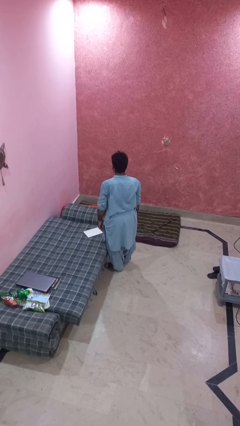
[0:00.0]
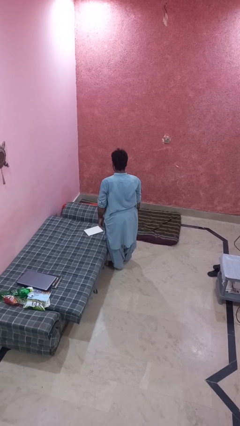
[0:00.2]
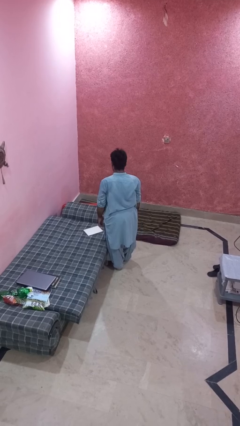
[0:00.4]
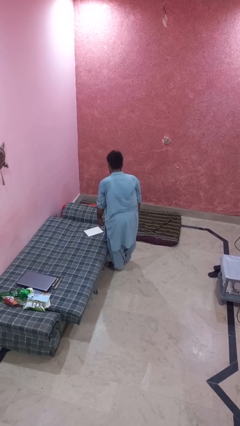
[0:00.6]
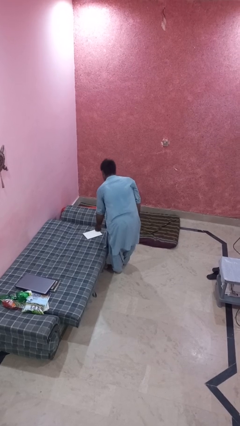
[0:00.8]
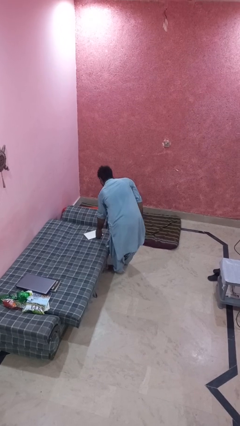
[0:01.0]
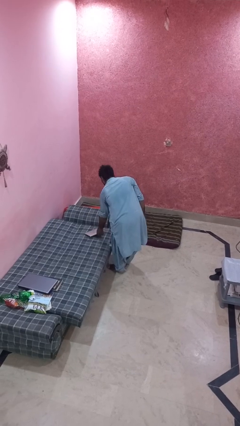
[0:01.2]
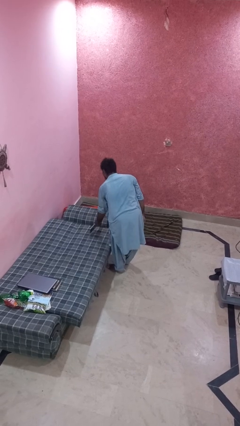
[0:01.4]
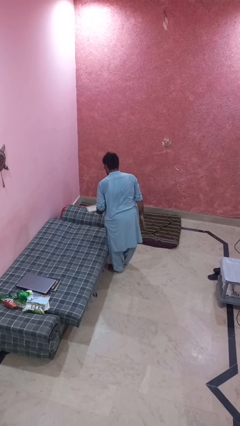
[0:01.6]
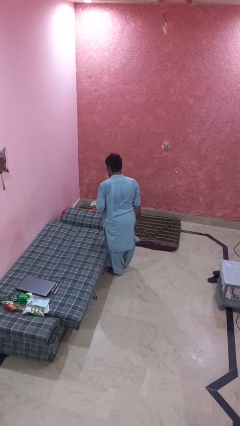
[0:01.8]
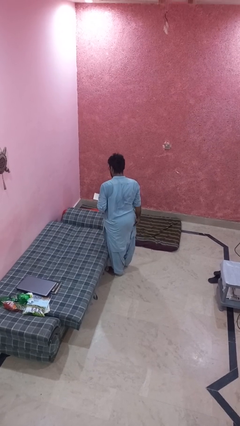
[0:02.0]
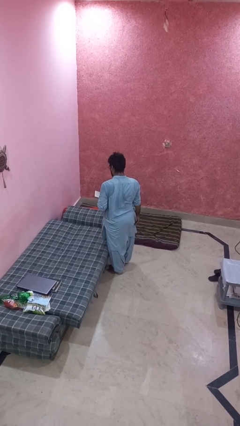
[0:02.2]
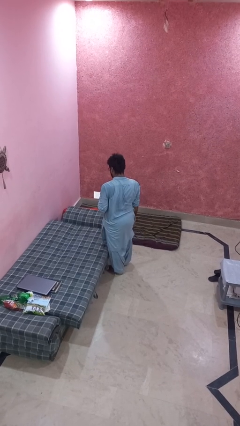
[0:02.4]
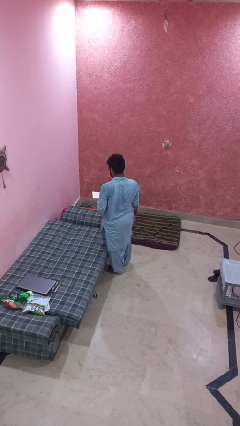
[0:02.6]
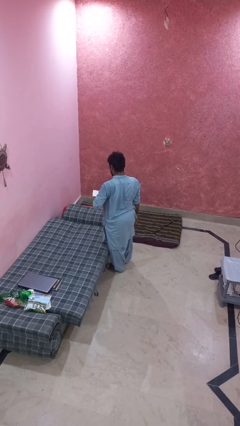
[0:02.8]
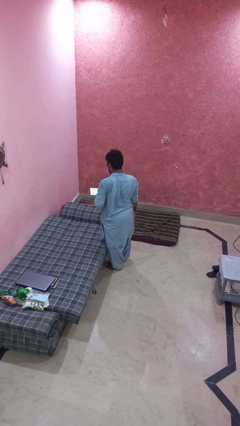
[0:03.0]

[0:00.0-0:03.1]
person picks up object from bed

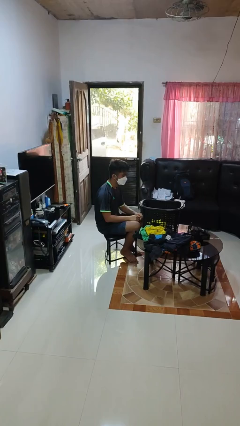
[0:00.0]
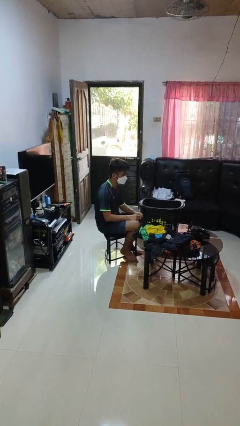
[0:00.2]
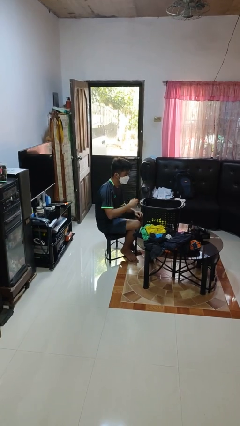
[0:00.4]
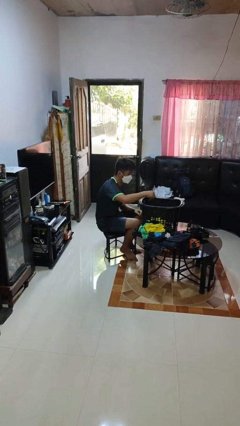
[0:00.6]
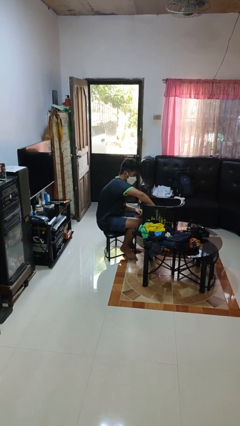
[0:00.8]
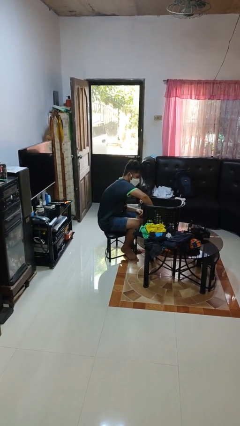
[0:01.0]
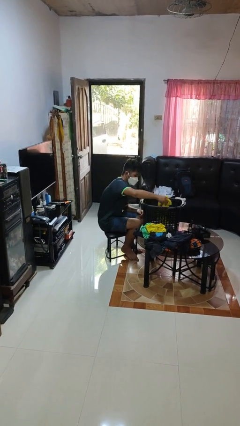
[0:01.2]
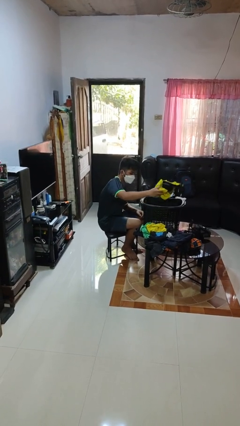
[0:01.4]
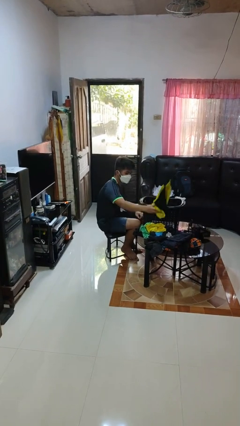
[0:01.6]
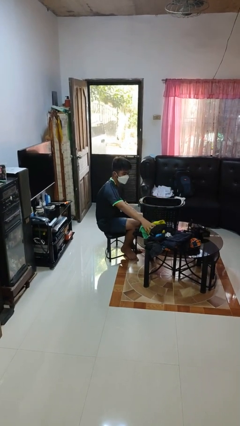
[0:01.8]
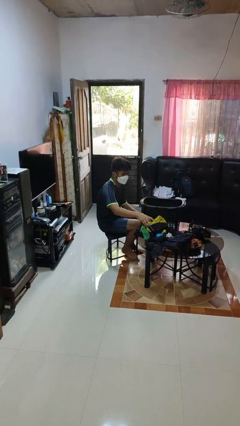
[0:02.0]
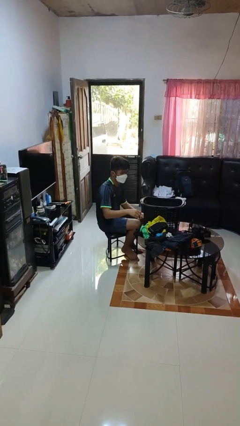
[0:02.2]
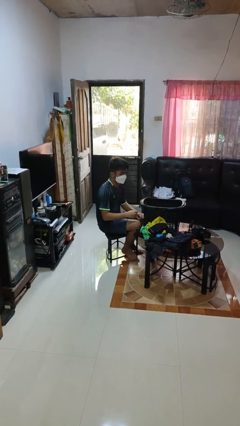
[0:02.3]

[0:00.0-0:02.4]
person takes object from basket

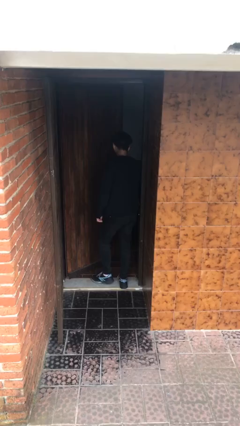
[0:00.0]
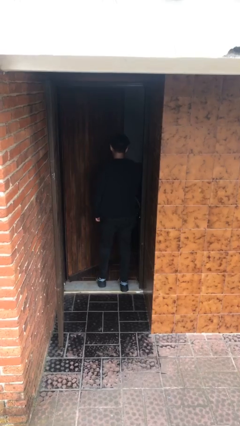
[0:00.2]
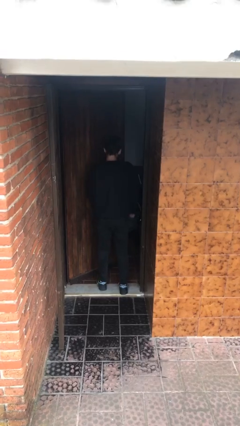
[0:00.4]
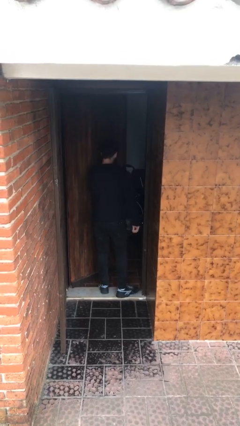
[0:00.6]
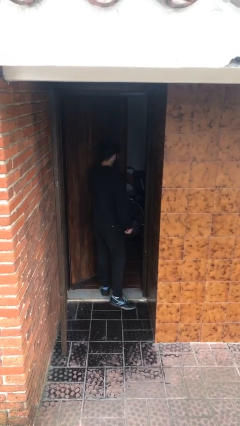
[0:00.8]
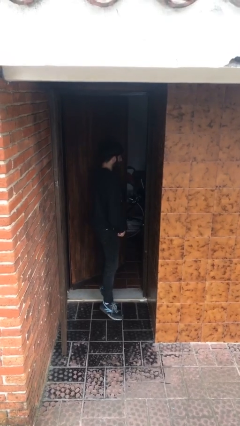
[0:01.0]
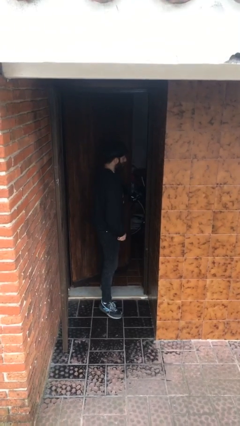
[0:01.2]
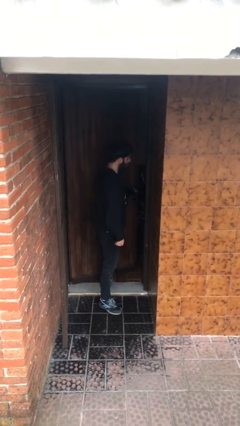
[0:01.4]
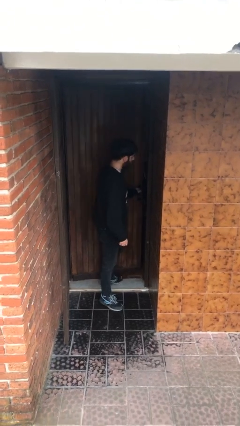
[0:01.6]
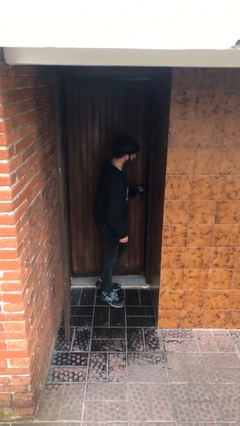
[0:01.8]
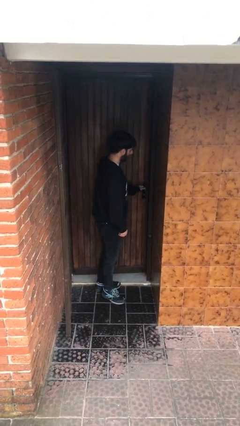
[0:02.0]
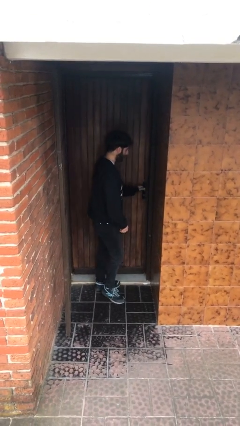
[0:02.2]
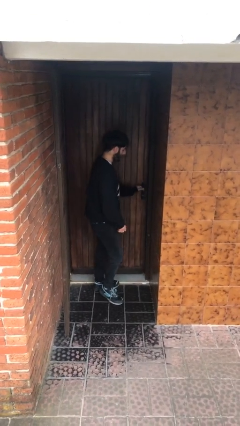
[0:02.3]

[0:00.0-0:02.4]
person closes facility door

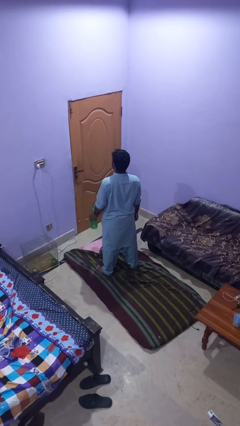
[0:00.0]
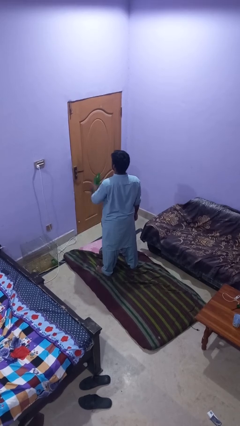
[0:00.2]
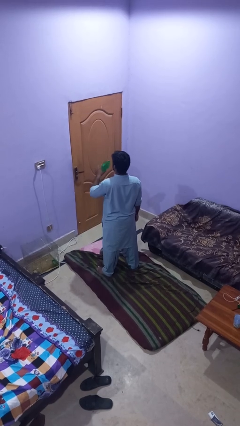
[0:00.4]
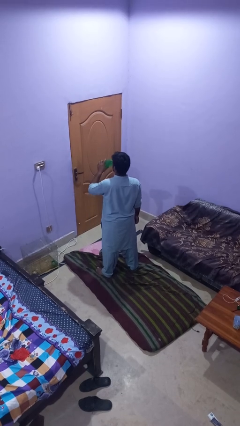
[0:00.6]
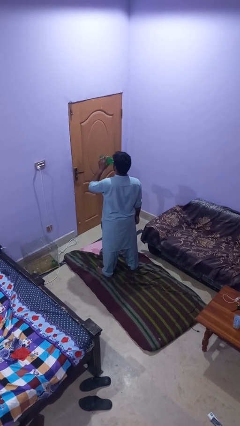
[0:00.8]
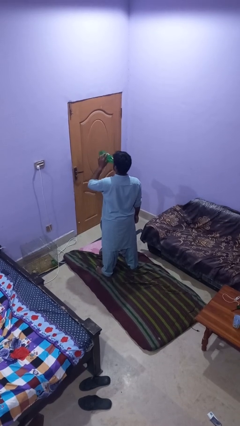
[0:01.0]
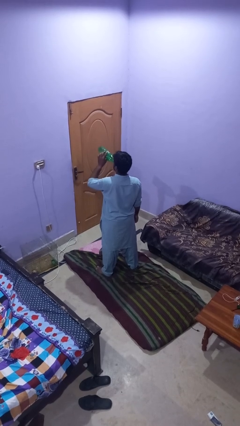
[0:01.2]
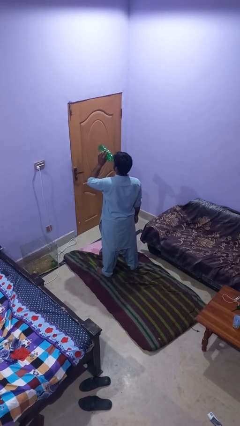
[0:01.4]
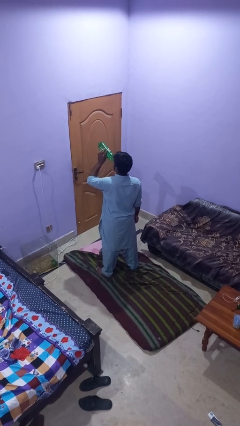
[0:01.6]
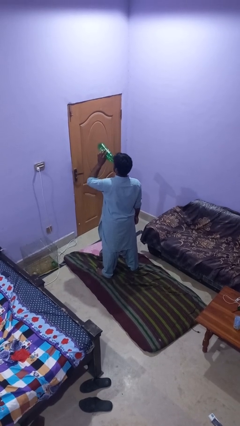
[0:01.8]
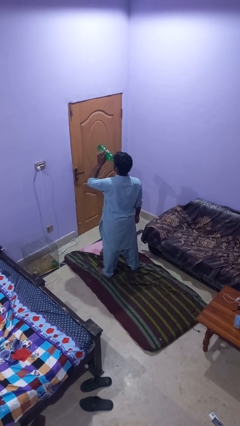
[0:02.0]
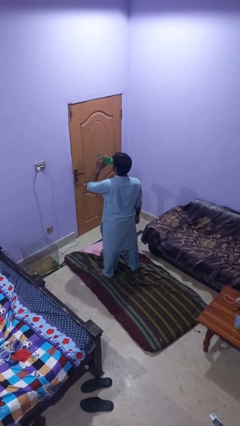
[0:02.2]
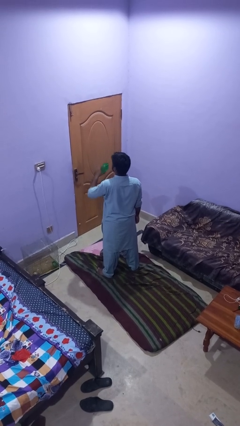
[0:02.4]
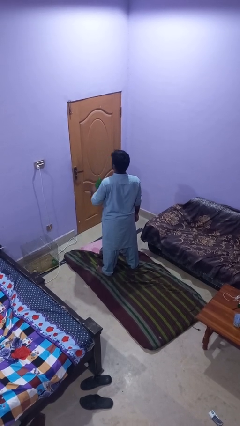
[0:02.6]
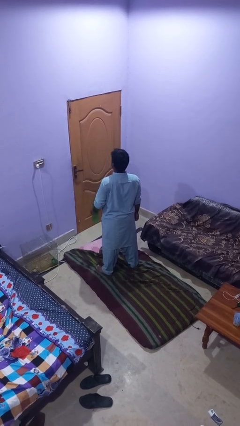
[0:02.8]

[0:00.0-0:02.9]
person drinks from bottle

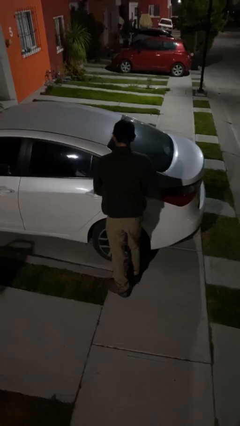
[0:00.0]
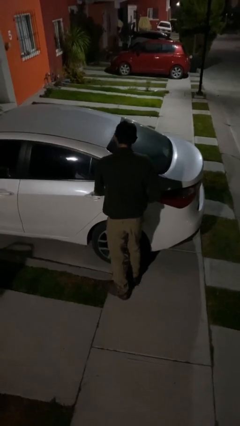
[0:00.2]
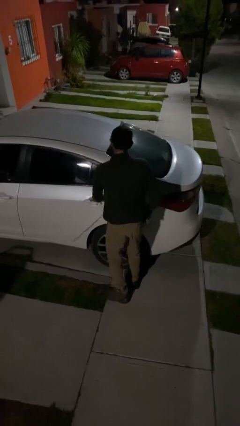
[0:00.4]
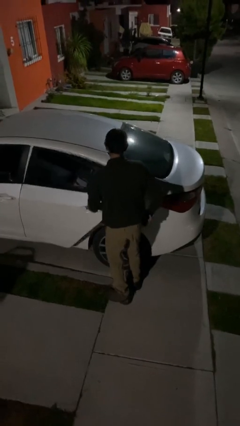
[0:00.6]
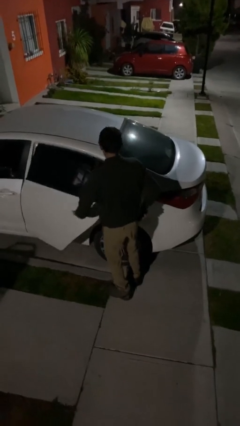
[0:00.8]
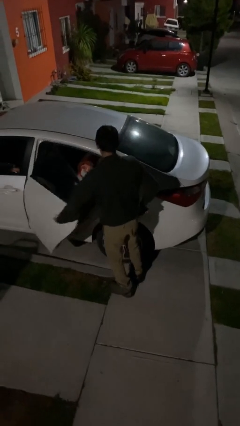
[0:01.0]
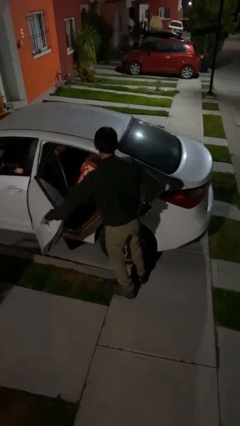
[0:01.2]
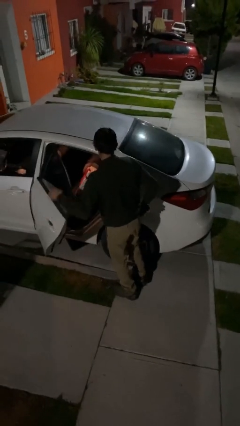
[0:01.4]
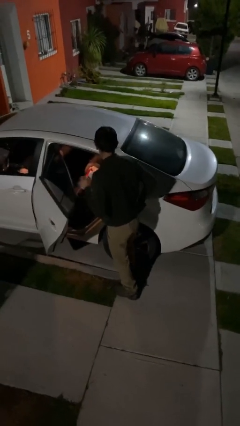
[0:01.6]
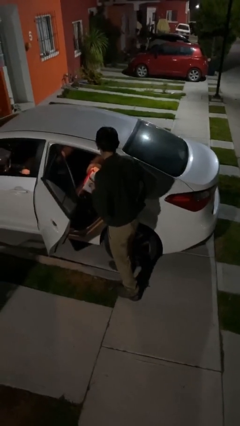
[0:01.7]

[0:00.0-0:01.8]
person opens car door

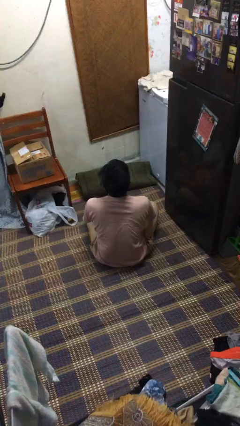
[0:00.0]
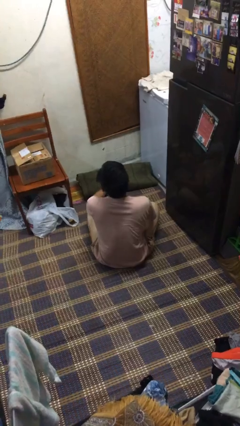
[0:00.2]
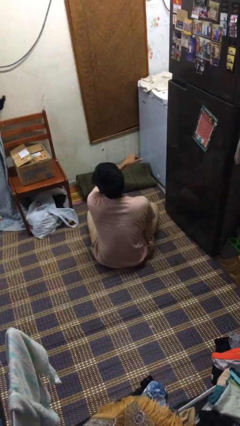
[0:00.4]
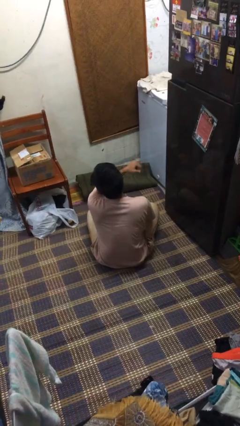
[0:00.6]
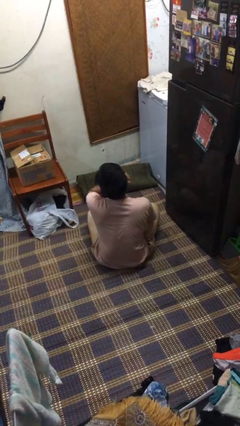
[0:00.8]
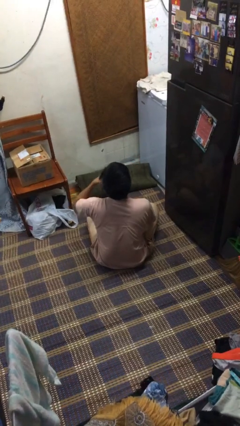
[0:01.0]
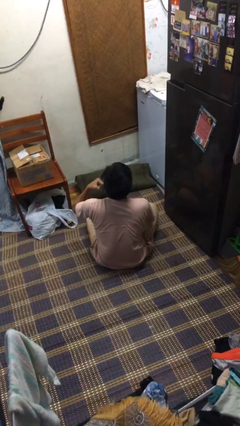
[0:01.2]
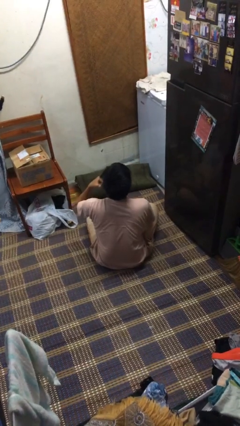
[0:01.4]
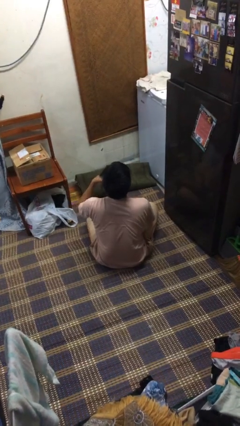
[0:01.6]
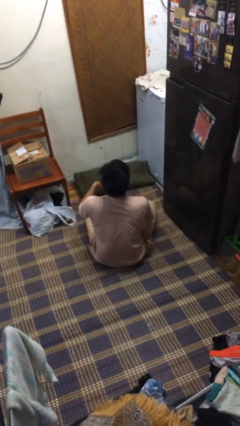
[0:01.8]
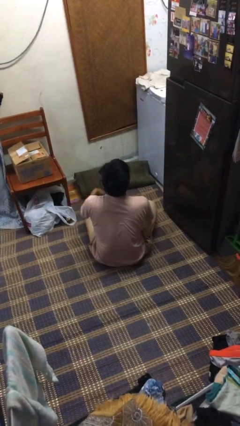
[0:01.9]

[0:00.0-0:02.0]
person gestures cut

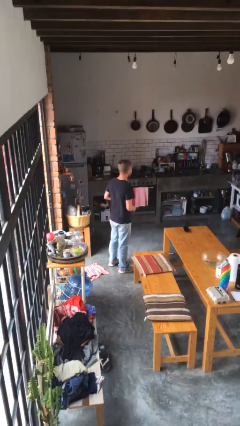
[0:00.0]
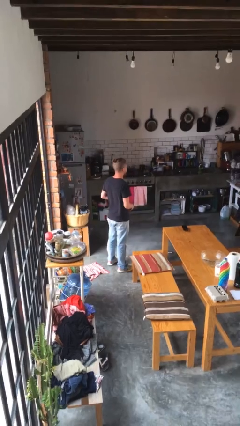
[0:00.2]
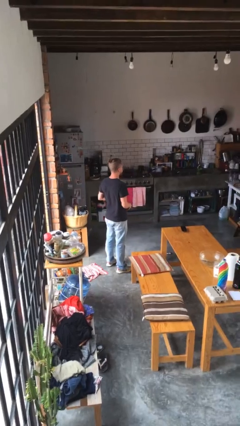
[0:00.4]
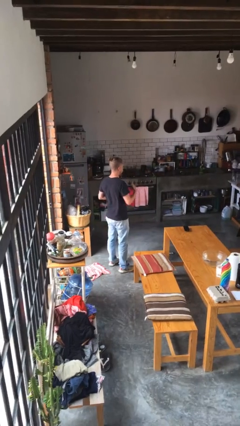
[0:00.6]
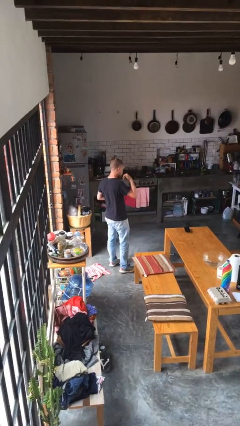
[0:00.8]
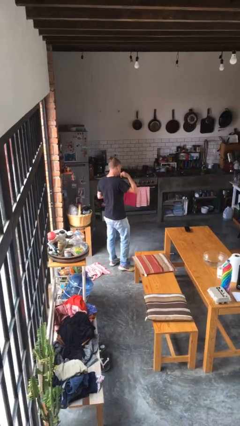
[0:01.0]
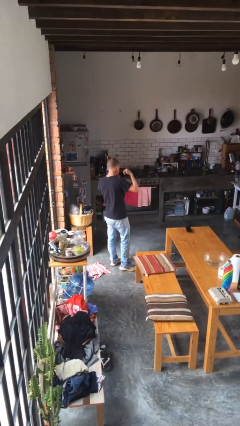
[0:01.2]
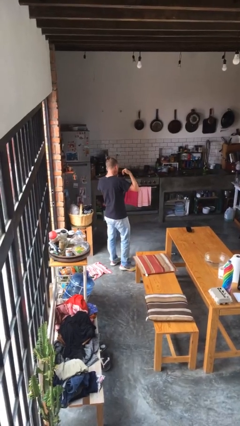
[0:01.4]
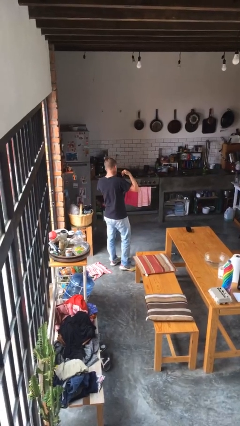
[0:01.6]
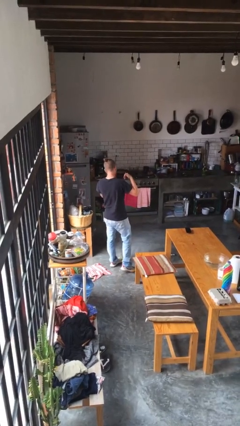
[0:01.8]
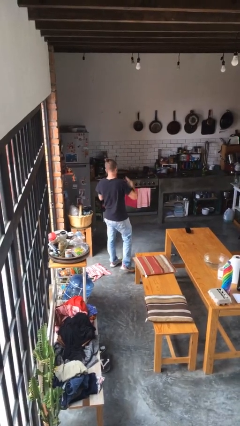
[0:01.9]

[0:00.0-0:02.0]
person gestures call me

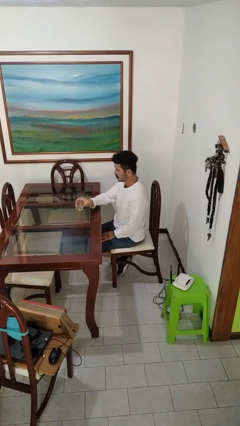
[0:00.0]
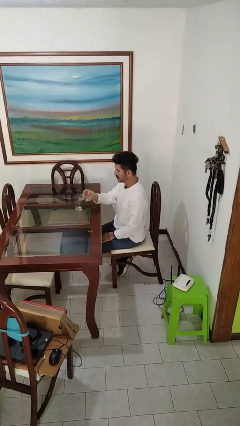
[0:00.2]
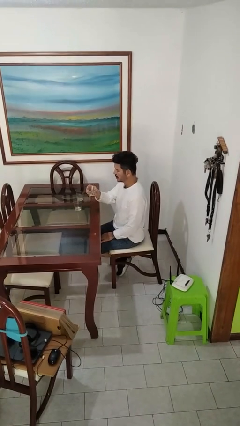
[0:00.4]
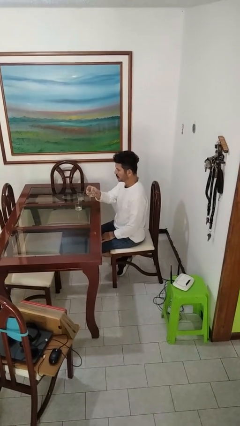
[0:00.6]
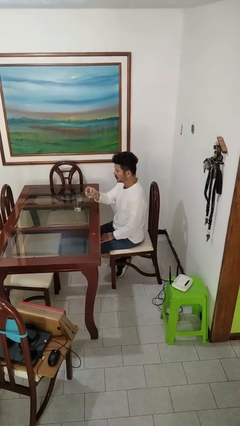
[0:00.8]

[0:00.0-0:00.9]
person picks up object from table
